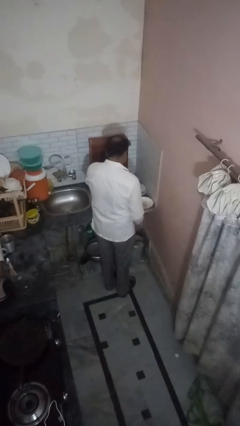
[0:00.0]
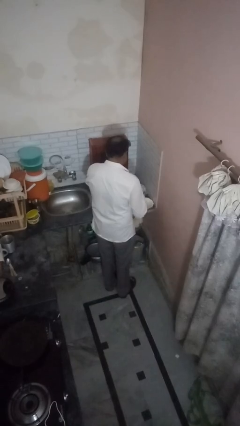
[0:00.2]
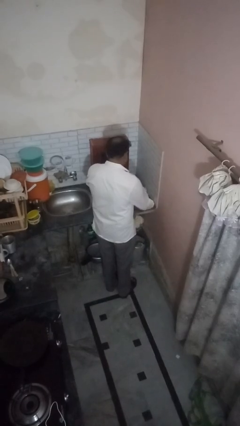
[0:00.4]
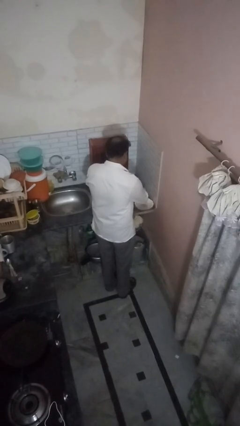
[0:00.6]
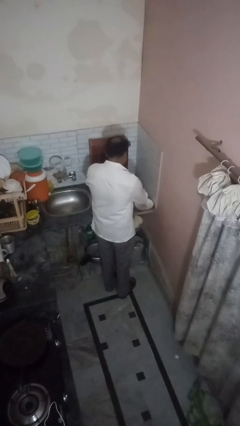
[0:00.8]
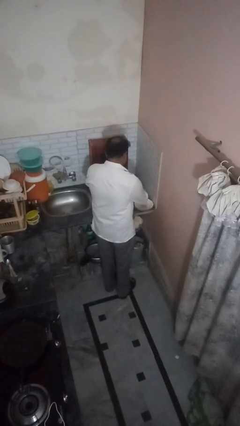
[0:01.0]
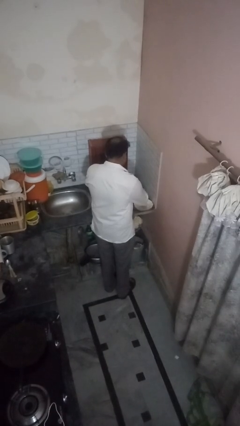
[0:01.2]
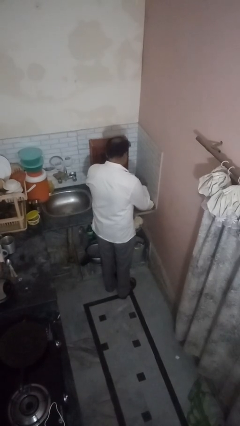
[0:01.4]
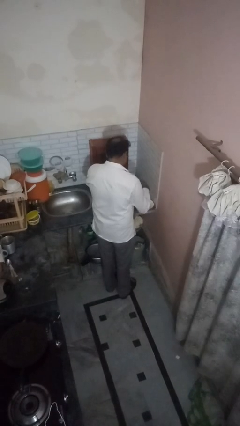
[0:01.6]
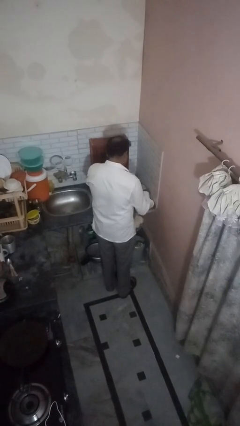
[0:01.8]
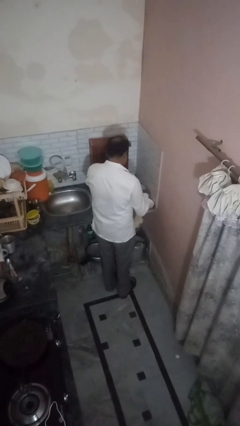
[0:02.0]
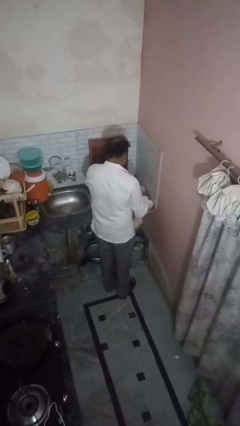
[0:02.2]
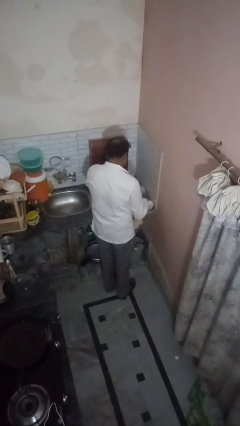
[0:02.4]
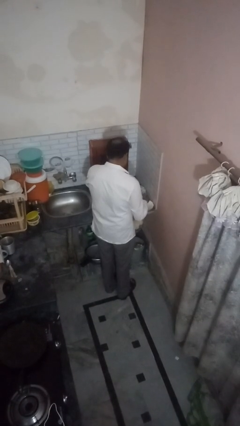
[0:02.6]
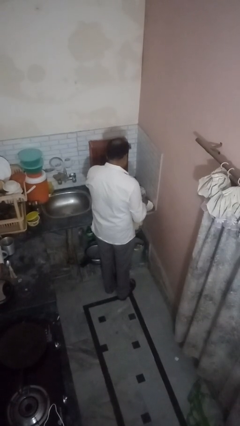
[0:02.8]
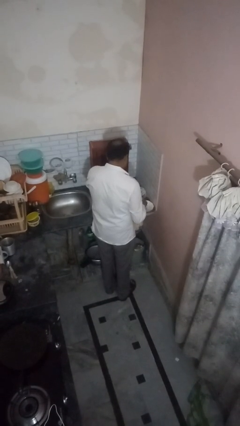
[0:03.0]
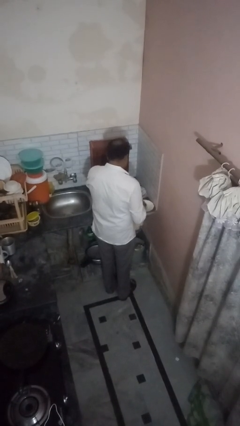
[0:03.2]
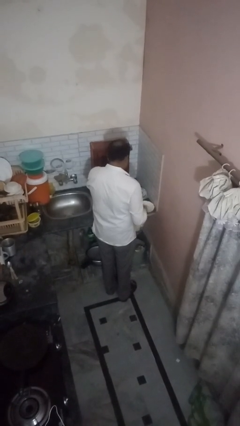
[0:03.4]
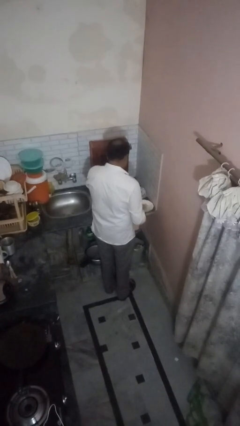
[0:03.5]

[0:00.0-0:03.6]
person pours into bowl

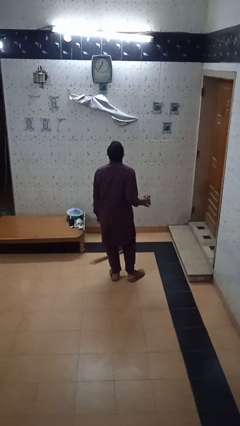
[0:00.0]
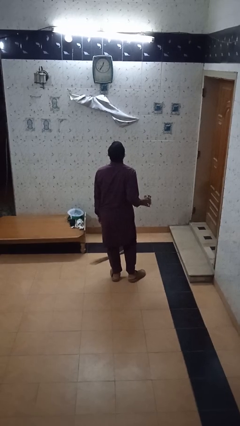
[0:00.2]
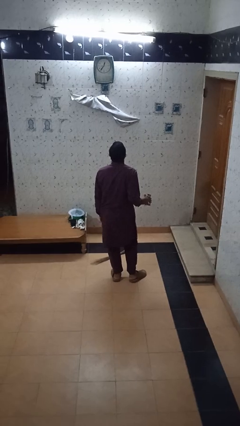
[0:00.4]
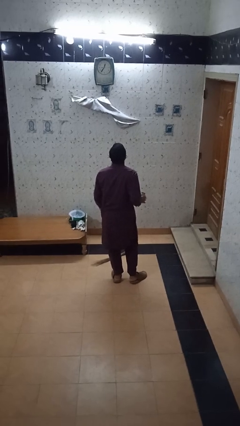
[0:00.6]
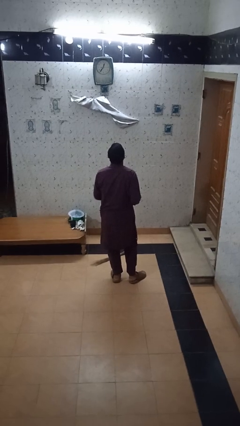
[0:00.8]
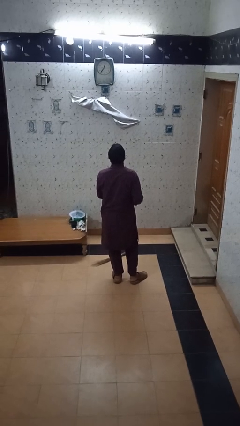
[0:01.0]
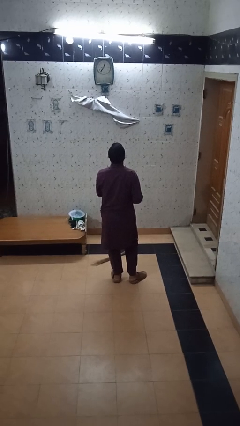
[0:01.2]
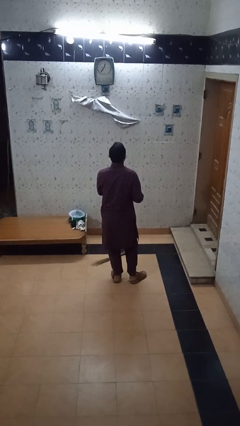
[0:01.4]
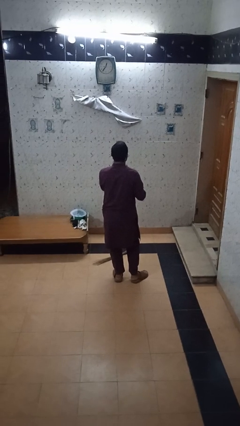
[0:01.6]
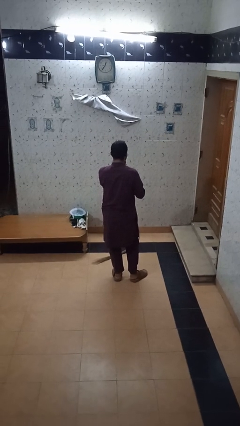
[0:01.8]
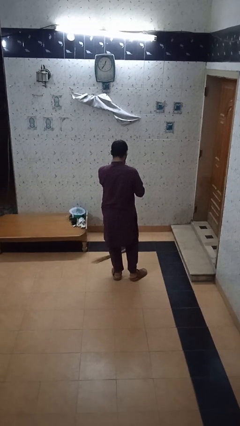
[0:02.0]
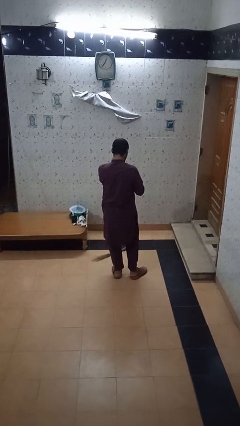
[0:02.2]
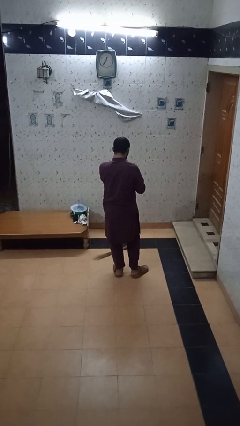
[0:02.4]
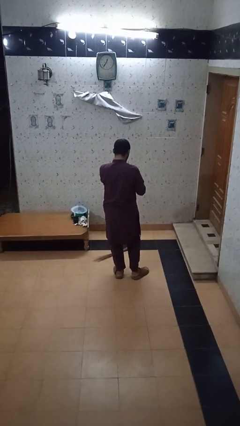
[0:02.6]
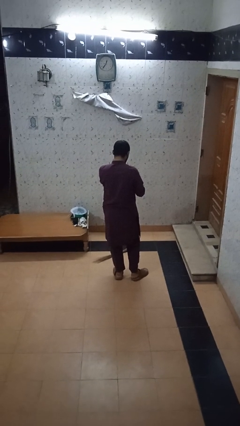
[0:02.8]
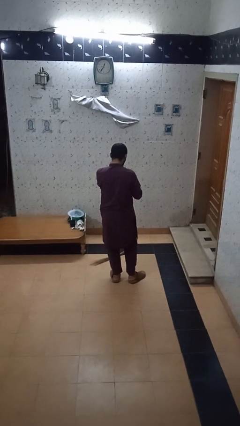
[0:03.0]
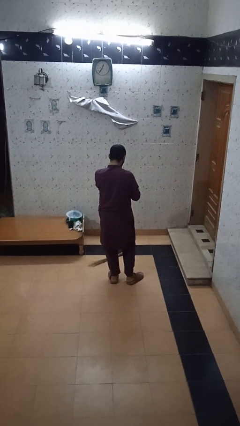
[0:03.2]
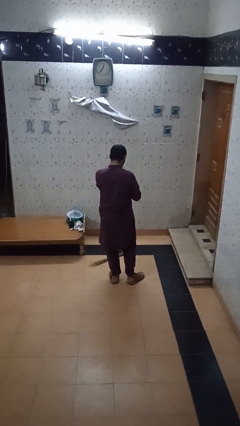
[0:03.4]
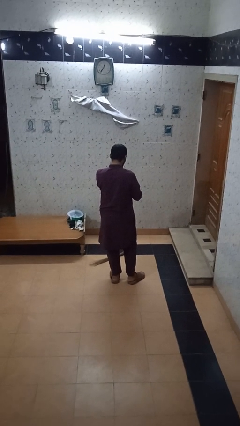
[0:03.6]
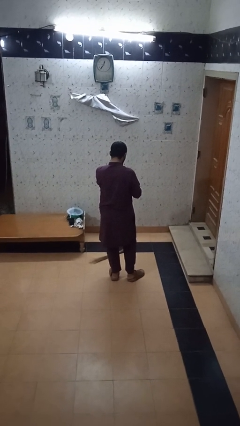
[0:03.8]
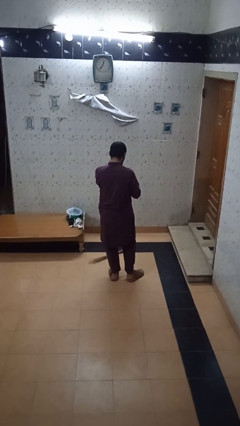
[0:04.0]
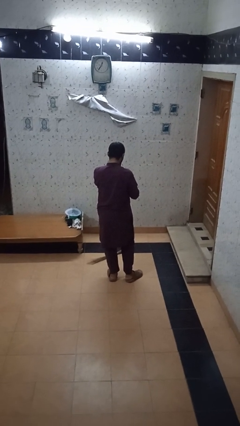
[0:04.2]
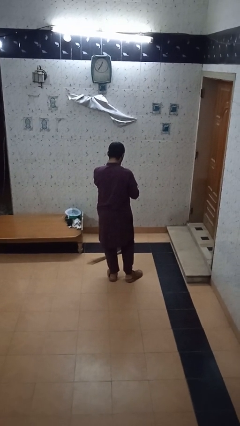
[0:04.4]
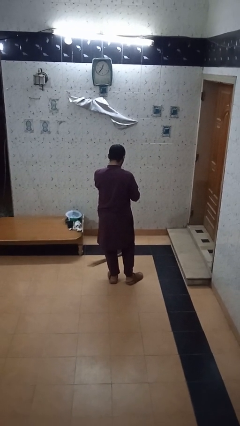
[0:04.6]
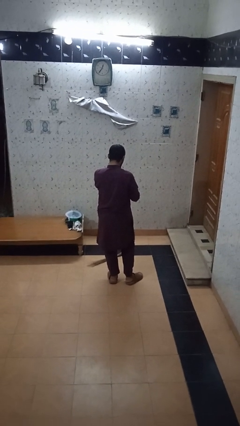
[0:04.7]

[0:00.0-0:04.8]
person drinks from straw

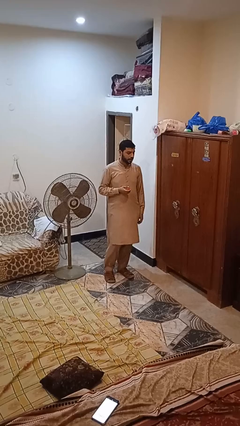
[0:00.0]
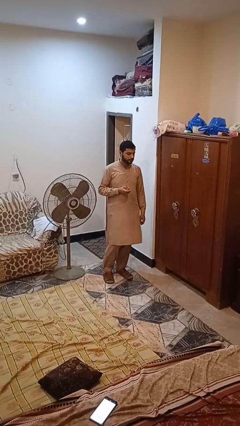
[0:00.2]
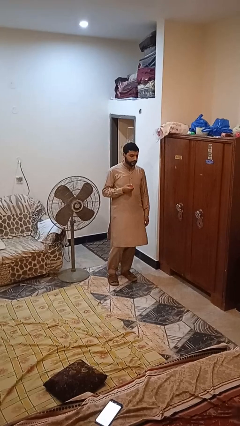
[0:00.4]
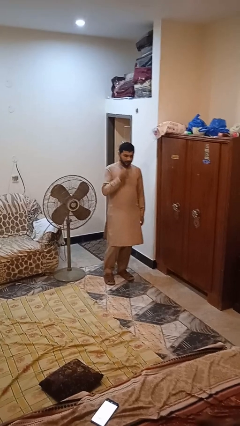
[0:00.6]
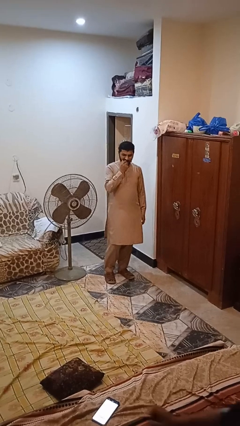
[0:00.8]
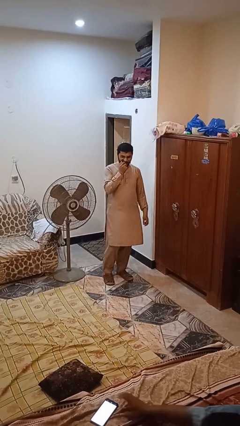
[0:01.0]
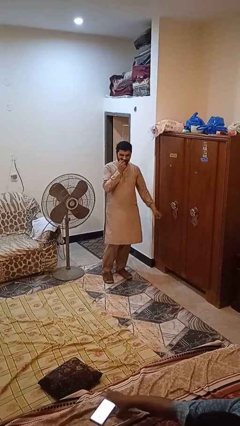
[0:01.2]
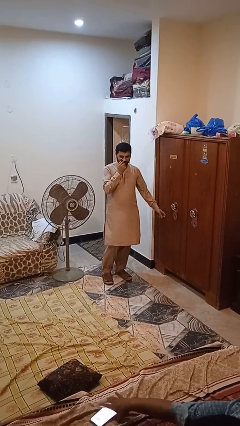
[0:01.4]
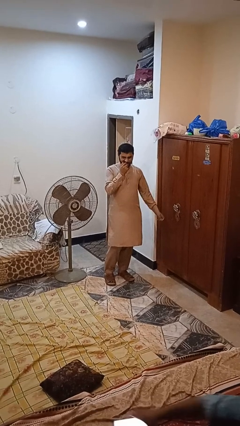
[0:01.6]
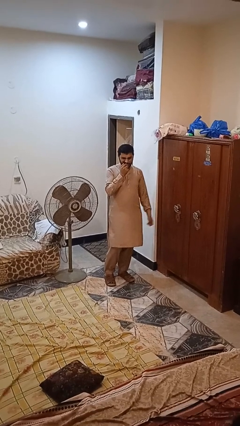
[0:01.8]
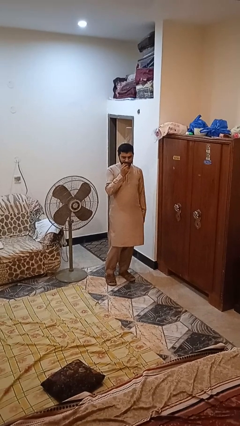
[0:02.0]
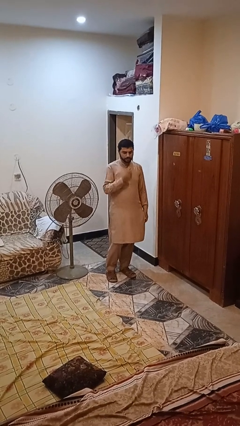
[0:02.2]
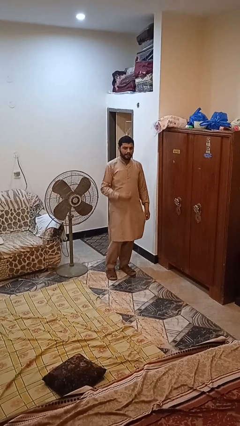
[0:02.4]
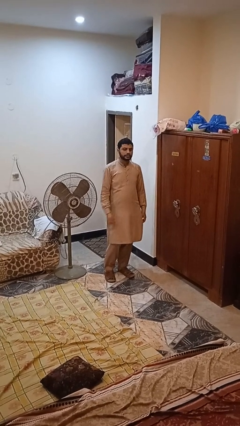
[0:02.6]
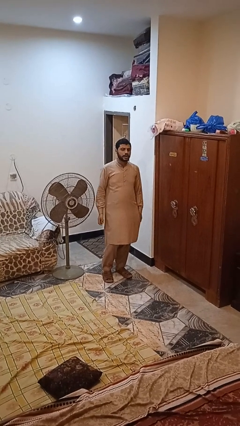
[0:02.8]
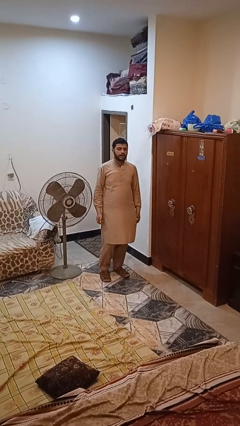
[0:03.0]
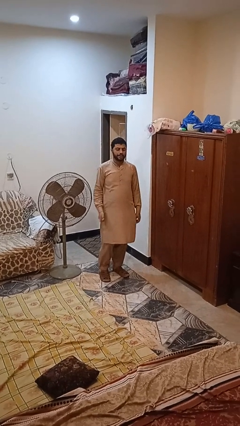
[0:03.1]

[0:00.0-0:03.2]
person eats apple

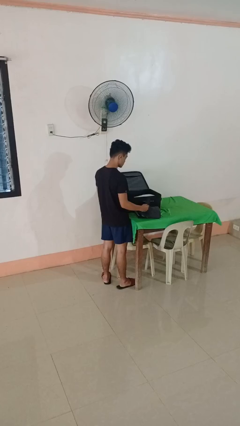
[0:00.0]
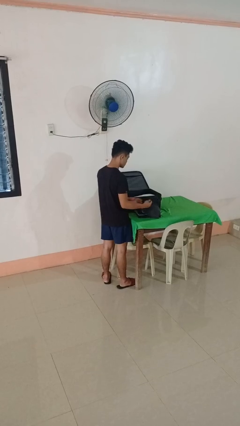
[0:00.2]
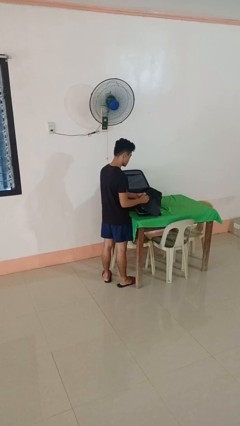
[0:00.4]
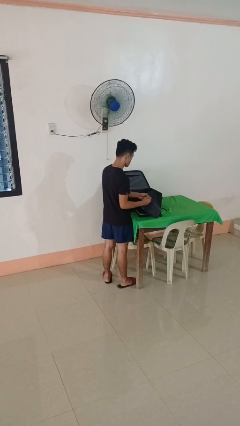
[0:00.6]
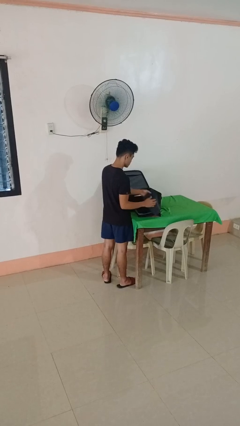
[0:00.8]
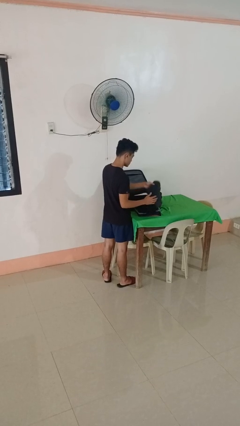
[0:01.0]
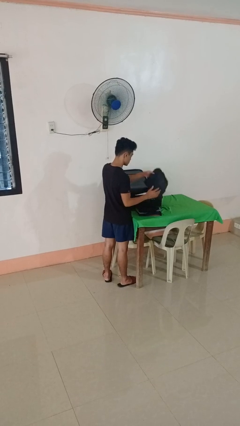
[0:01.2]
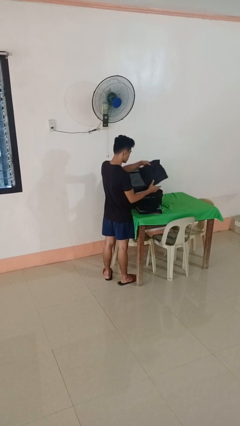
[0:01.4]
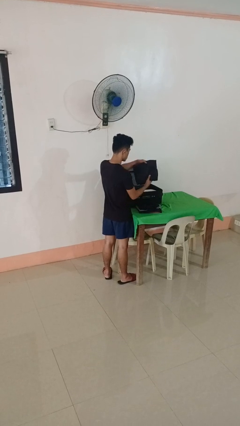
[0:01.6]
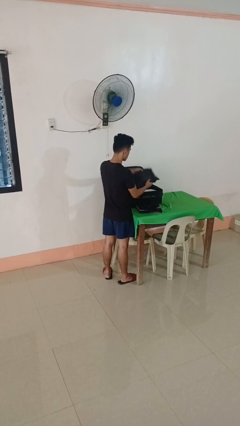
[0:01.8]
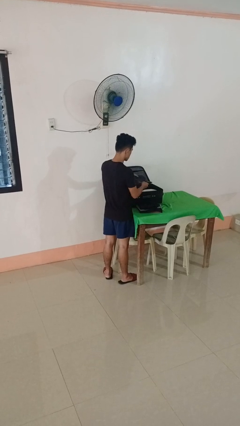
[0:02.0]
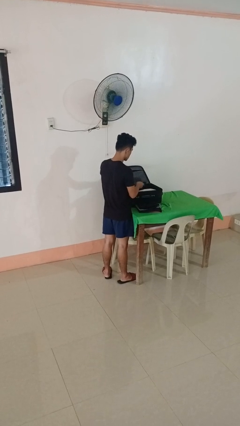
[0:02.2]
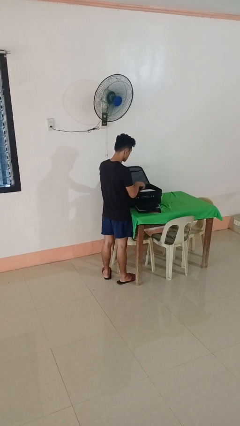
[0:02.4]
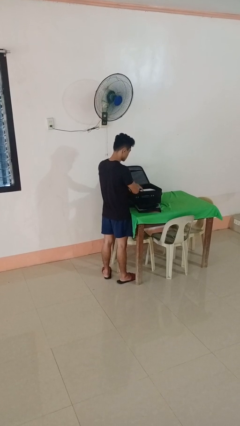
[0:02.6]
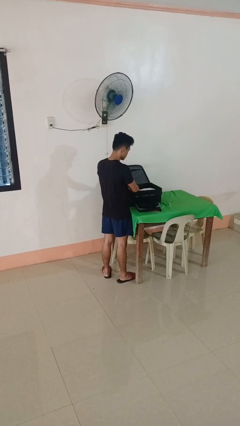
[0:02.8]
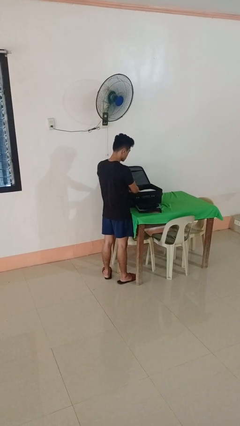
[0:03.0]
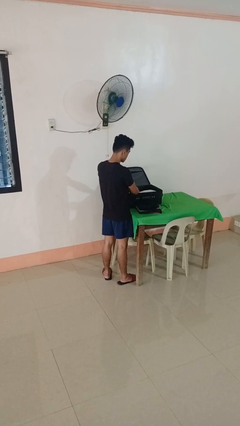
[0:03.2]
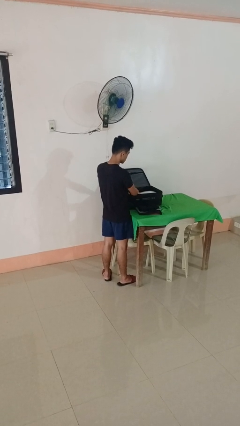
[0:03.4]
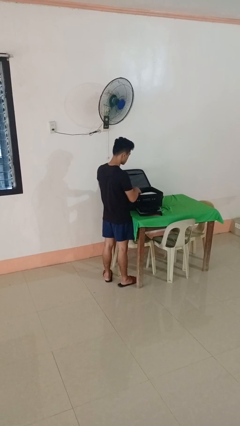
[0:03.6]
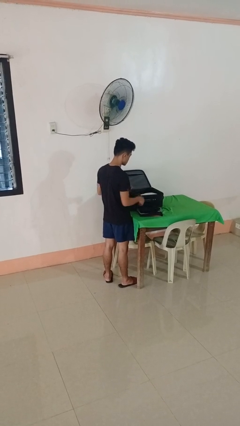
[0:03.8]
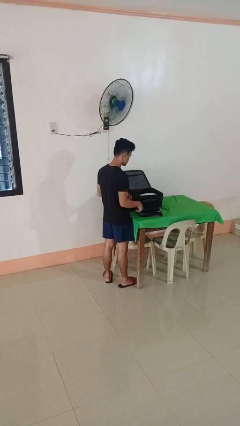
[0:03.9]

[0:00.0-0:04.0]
person loads clothes into suitcase

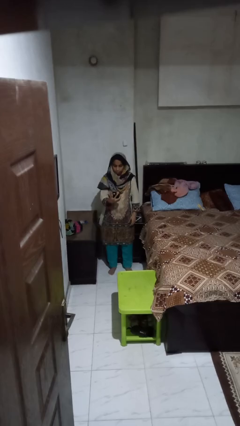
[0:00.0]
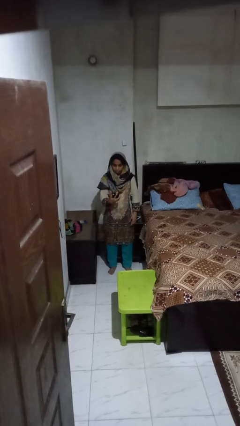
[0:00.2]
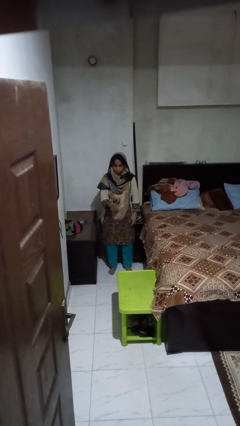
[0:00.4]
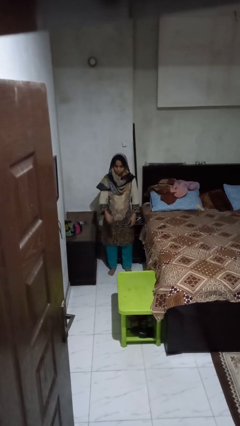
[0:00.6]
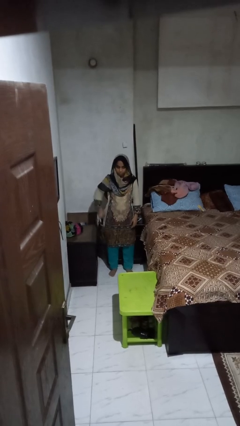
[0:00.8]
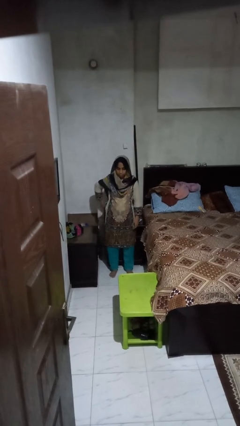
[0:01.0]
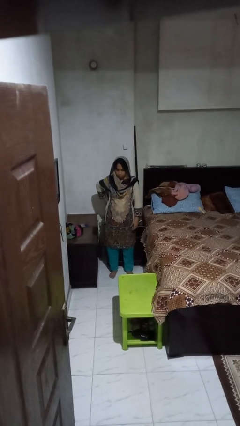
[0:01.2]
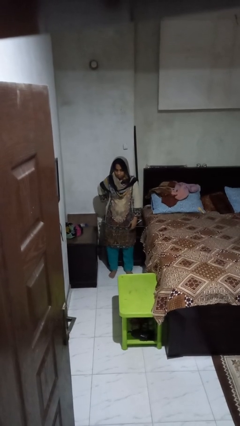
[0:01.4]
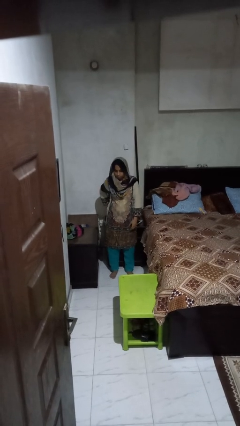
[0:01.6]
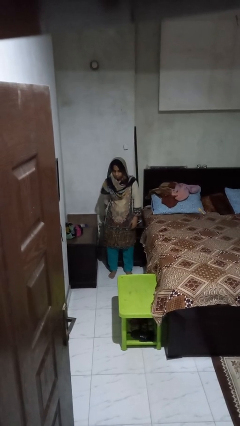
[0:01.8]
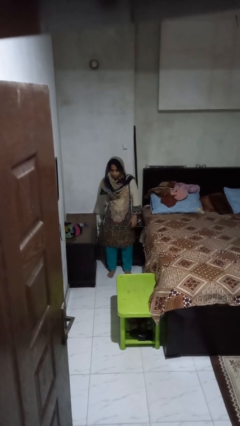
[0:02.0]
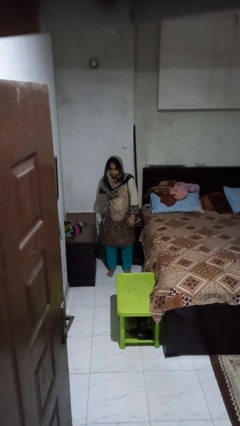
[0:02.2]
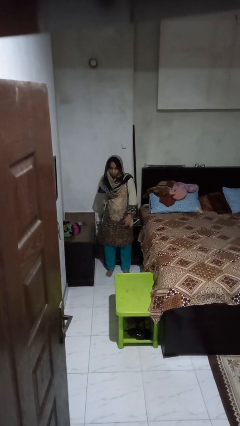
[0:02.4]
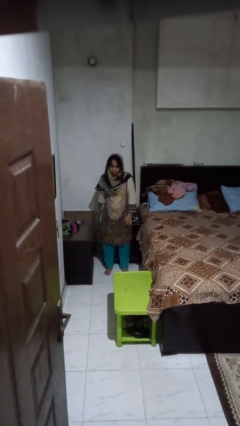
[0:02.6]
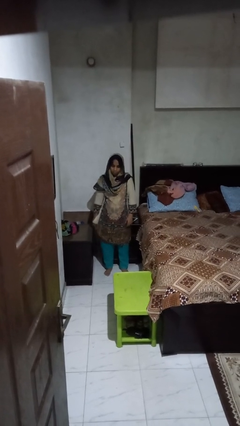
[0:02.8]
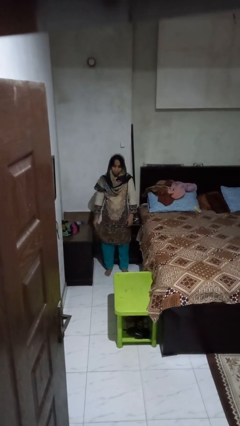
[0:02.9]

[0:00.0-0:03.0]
person puts phone into pocket
